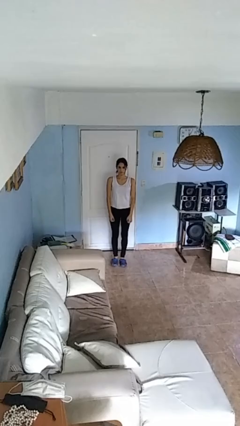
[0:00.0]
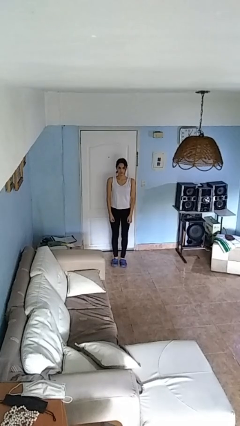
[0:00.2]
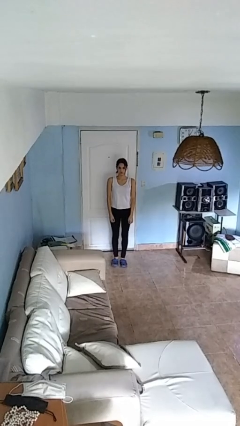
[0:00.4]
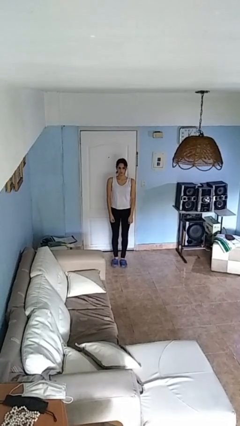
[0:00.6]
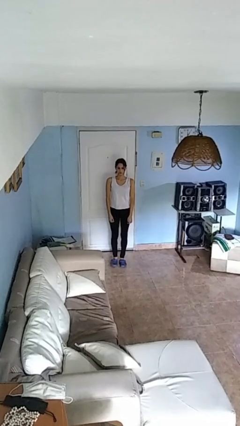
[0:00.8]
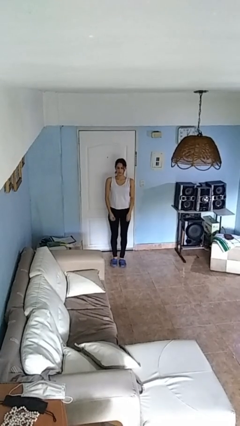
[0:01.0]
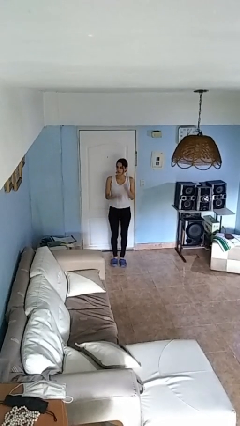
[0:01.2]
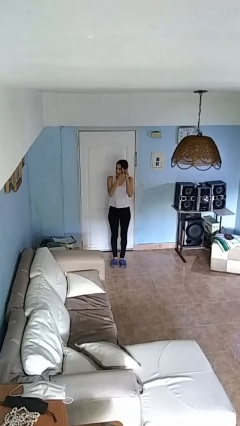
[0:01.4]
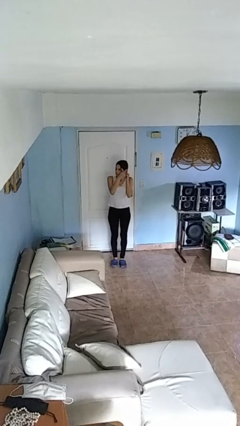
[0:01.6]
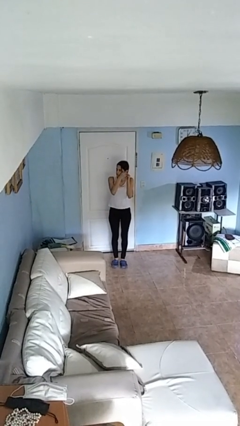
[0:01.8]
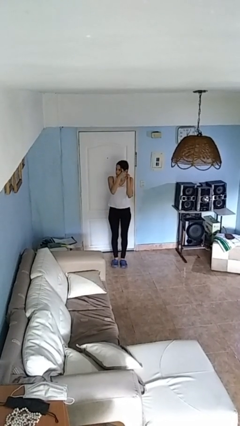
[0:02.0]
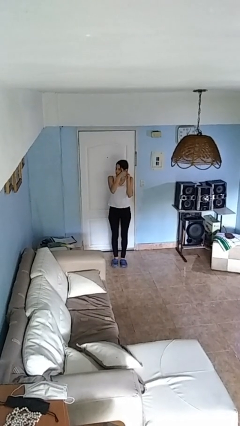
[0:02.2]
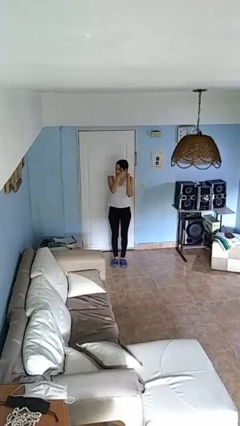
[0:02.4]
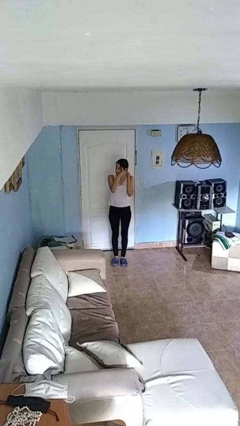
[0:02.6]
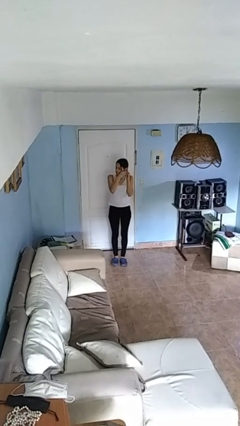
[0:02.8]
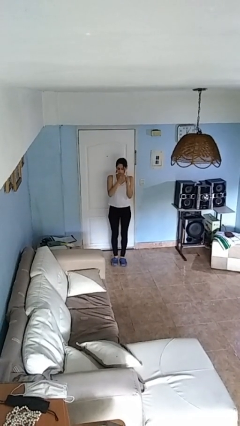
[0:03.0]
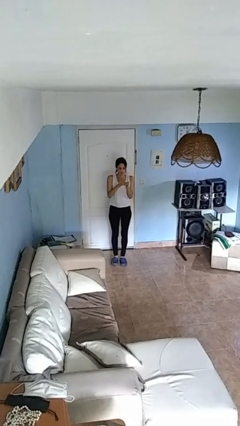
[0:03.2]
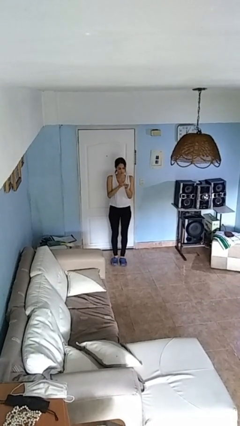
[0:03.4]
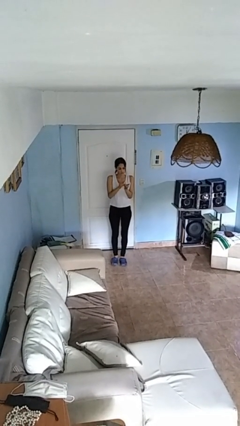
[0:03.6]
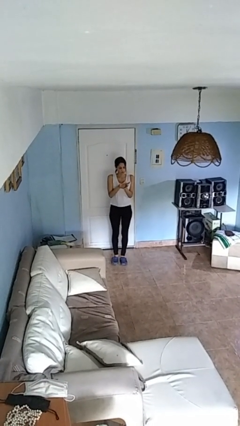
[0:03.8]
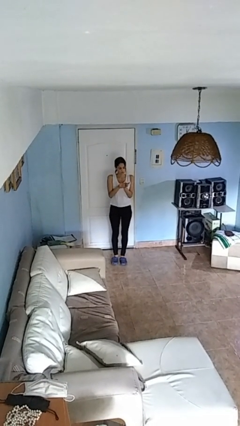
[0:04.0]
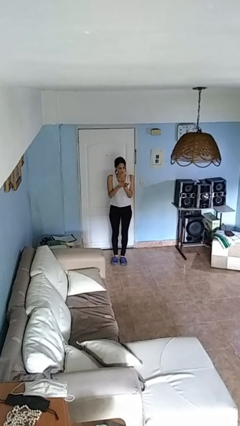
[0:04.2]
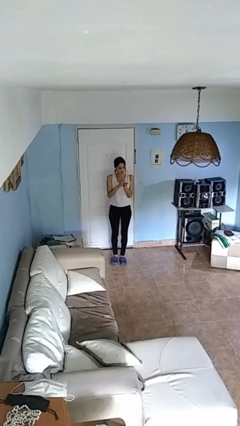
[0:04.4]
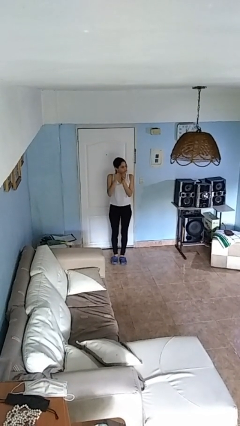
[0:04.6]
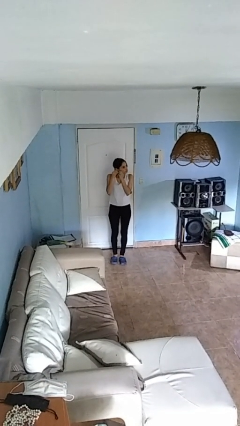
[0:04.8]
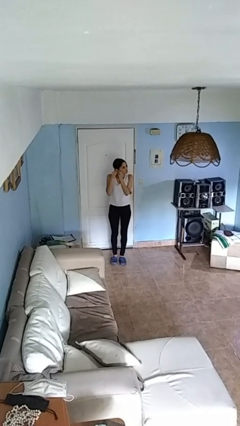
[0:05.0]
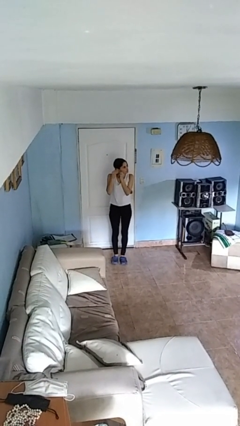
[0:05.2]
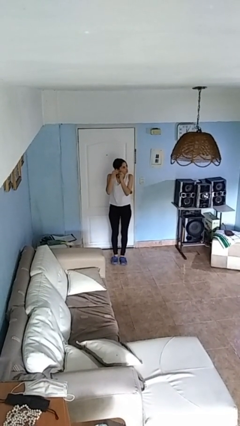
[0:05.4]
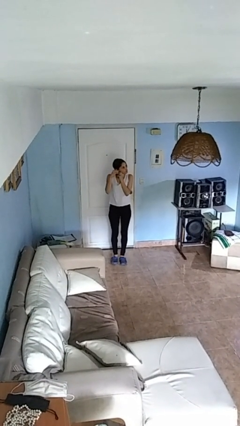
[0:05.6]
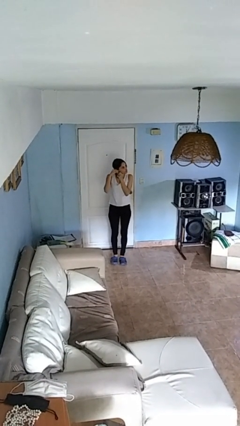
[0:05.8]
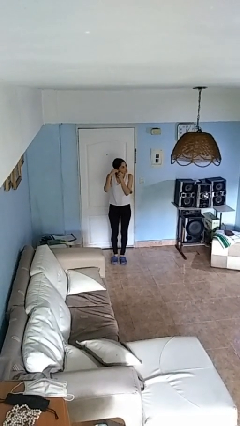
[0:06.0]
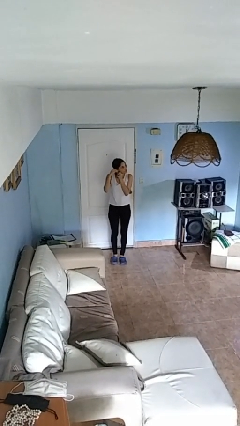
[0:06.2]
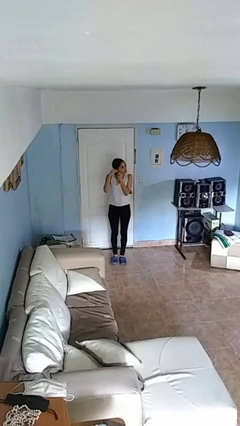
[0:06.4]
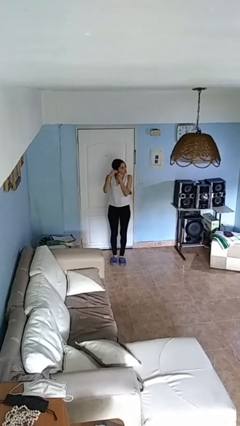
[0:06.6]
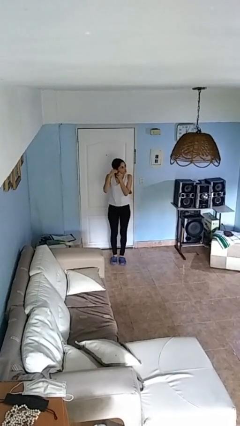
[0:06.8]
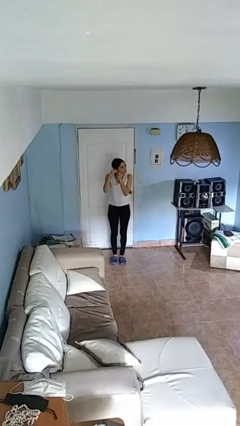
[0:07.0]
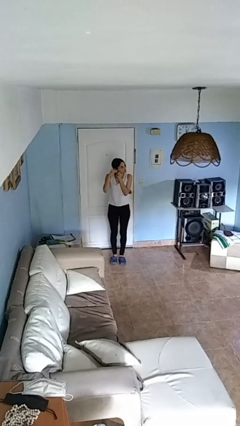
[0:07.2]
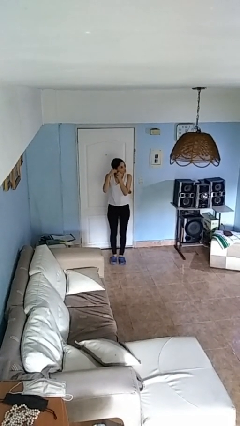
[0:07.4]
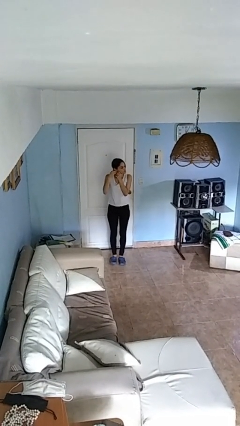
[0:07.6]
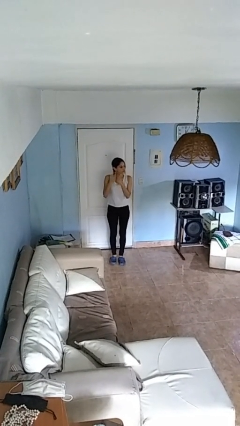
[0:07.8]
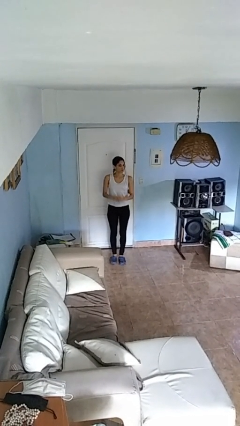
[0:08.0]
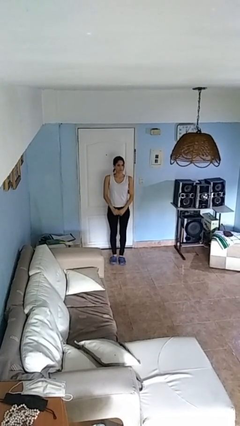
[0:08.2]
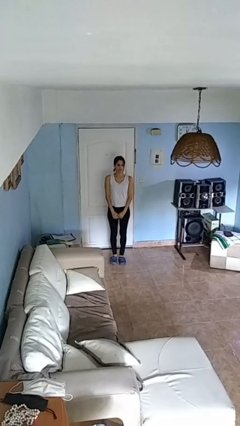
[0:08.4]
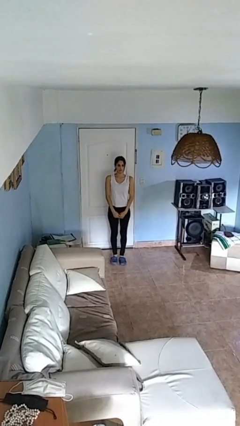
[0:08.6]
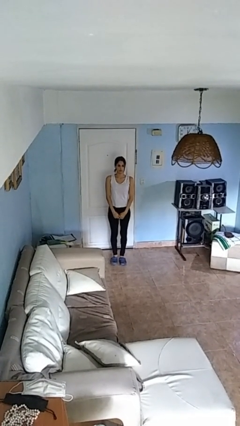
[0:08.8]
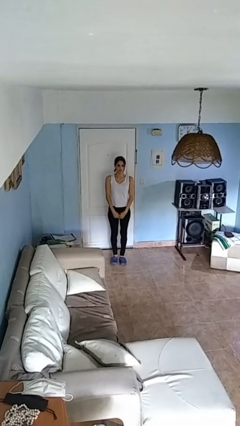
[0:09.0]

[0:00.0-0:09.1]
person puts on earrings

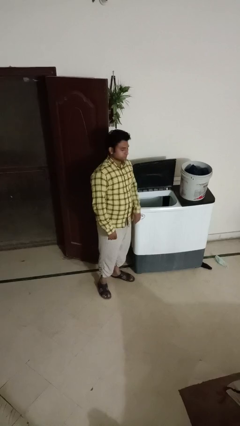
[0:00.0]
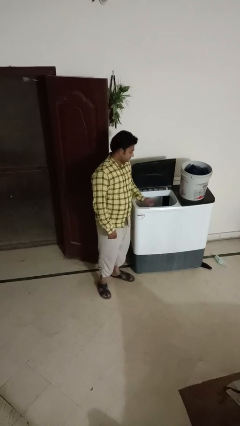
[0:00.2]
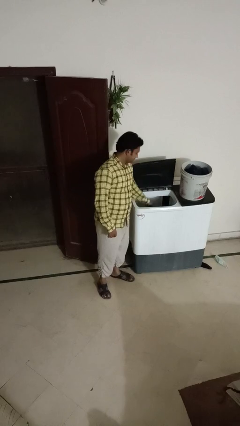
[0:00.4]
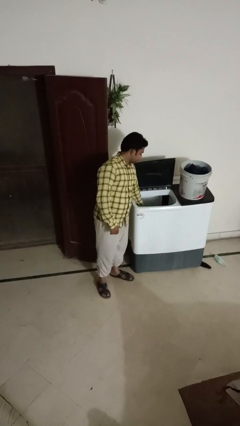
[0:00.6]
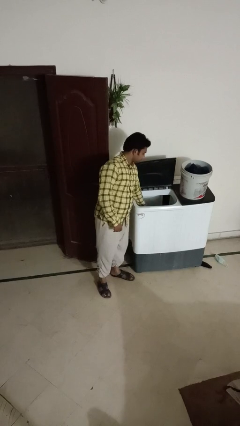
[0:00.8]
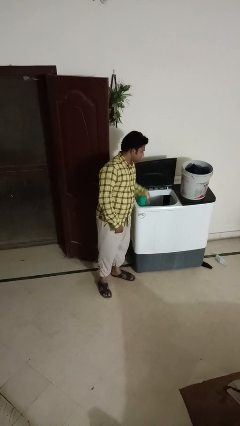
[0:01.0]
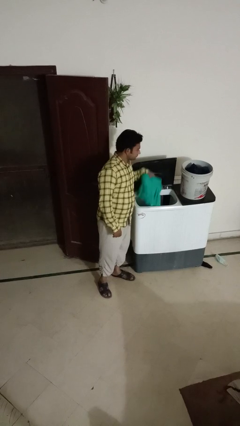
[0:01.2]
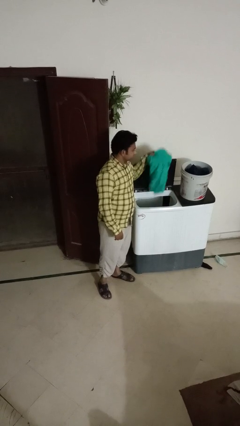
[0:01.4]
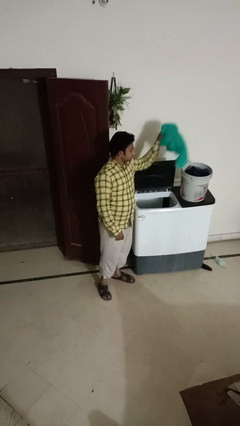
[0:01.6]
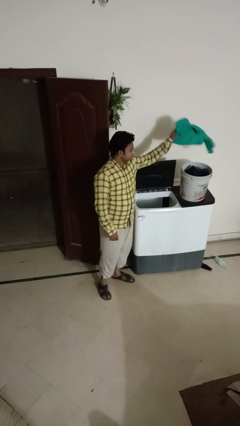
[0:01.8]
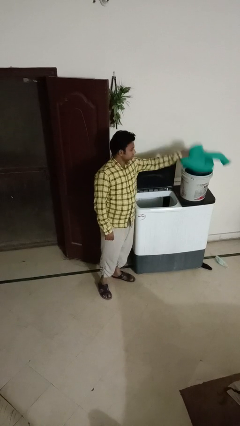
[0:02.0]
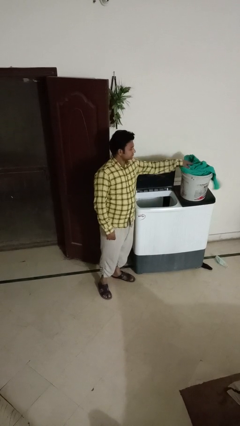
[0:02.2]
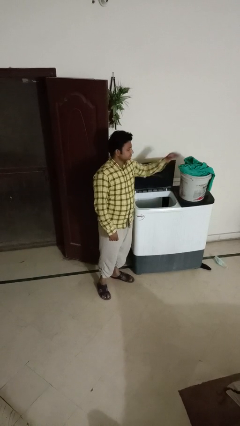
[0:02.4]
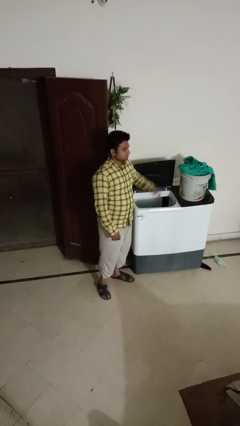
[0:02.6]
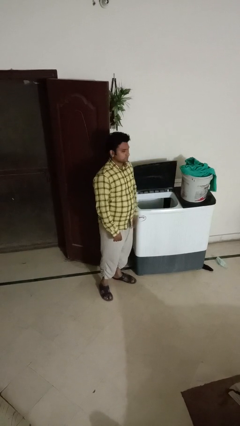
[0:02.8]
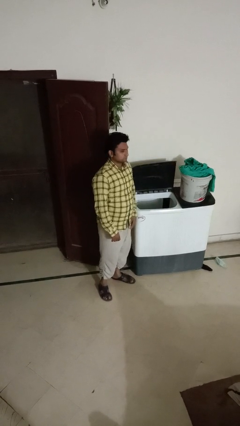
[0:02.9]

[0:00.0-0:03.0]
person unloads clotheswasher

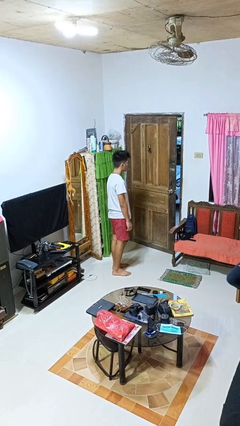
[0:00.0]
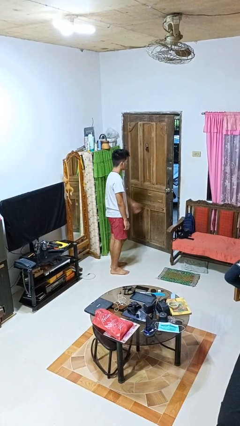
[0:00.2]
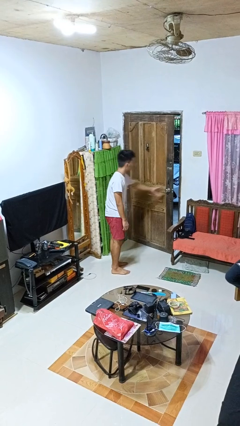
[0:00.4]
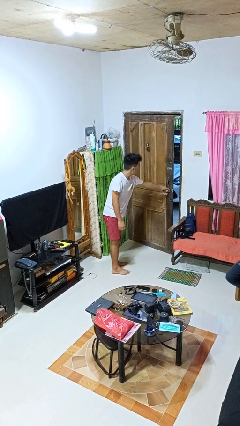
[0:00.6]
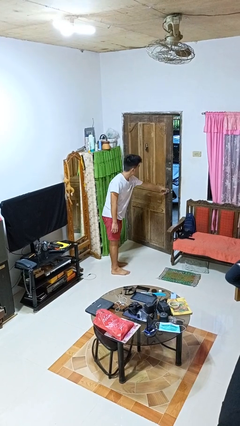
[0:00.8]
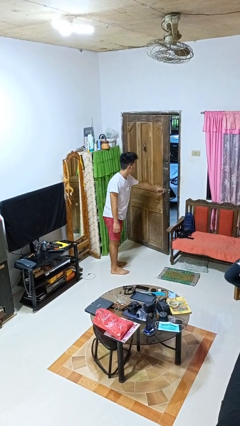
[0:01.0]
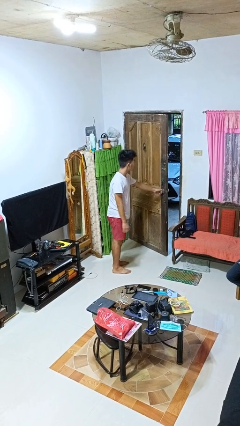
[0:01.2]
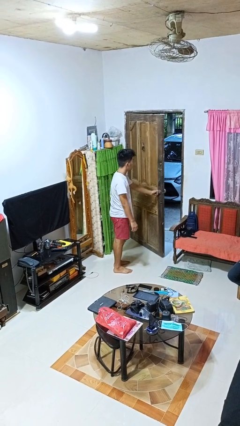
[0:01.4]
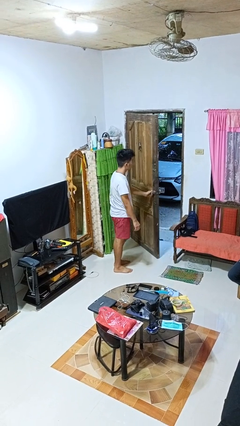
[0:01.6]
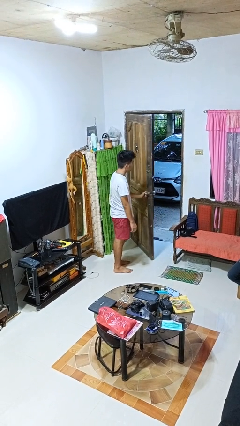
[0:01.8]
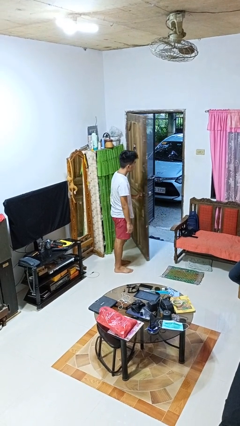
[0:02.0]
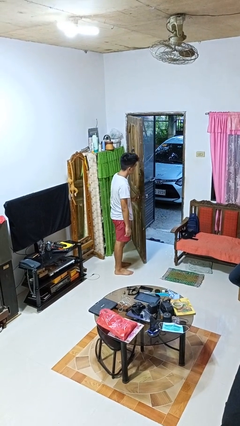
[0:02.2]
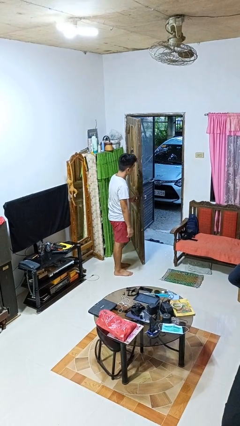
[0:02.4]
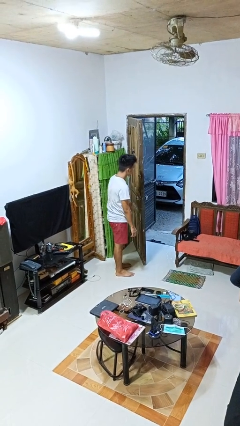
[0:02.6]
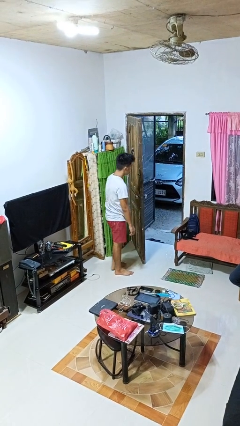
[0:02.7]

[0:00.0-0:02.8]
person opens facility door

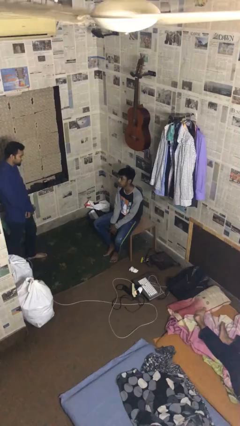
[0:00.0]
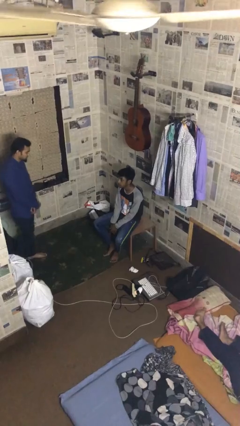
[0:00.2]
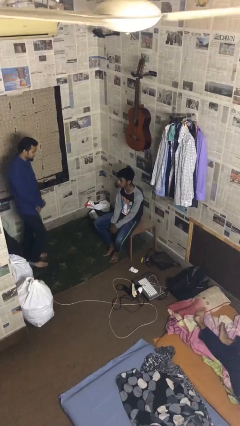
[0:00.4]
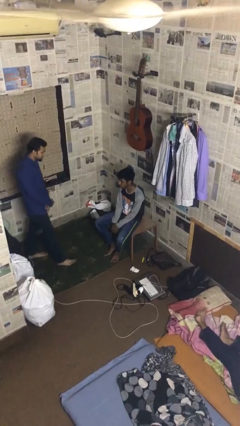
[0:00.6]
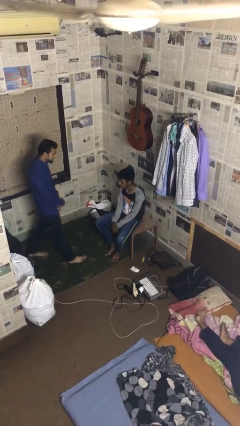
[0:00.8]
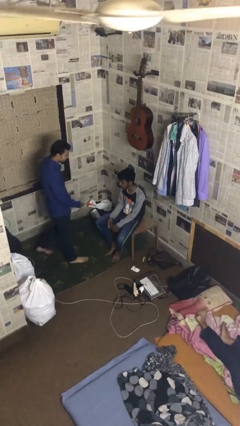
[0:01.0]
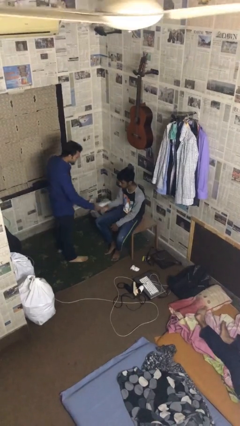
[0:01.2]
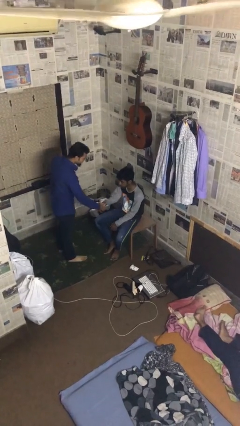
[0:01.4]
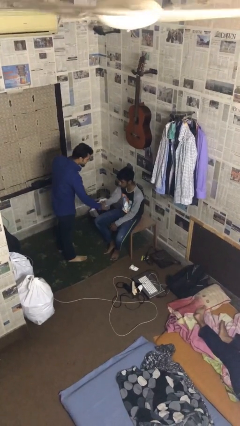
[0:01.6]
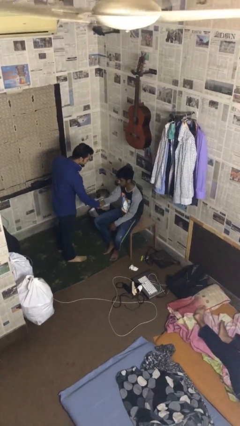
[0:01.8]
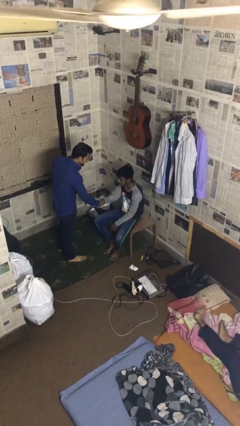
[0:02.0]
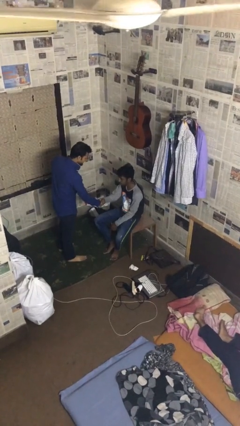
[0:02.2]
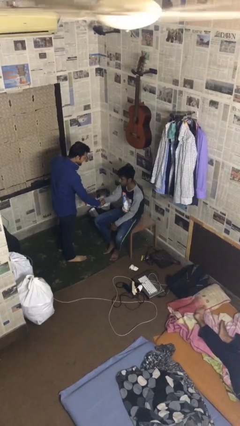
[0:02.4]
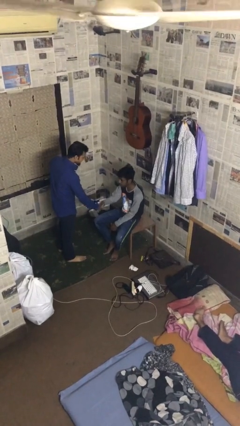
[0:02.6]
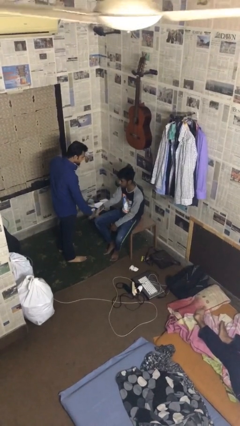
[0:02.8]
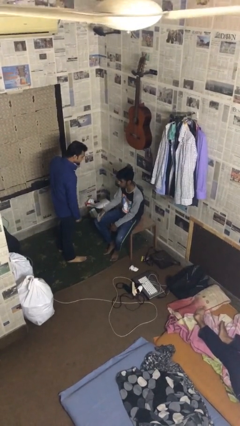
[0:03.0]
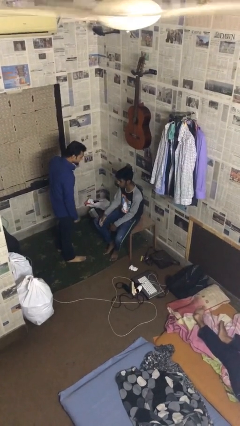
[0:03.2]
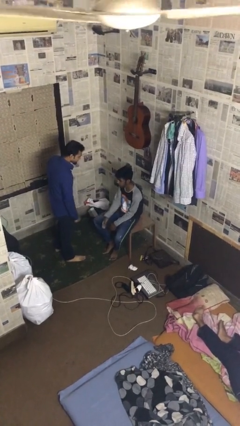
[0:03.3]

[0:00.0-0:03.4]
person shakes hand
